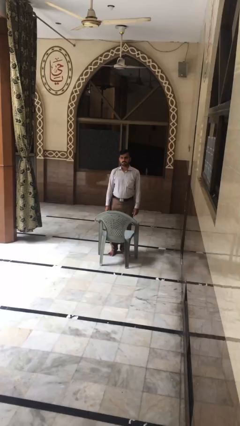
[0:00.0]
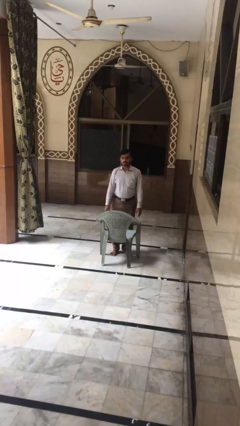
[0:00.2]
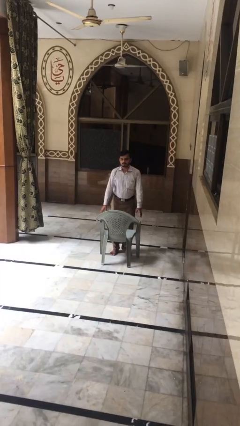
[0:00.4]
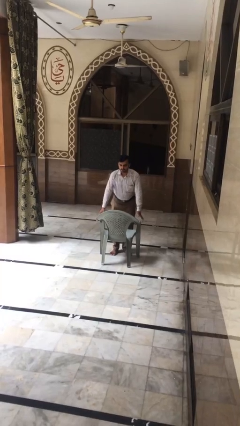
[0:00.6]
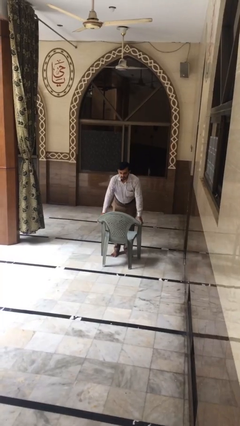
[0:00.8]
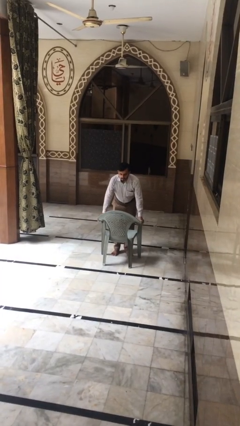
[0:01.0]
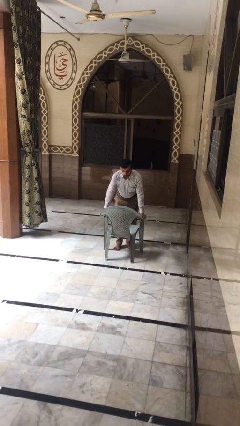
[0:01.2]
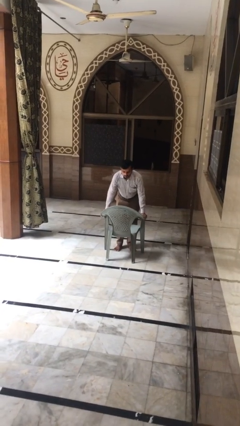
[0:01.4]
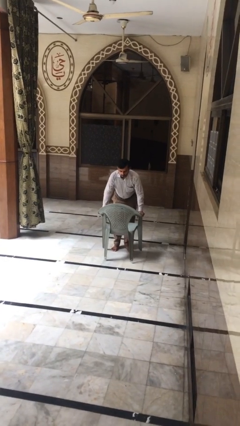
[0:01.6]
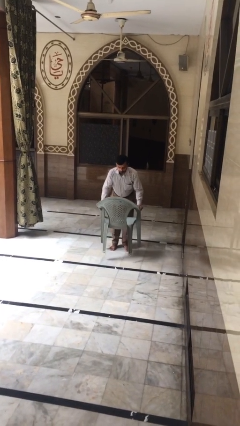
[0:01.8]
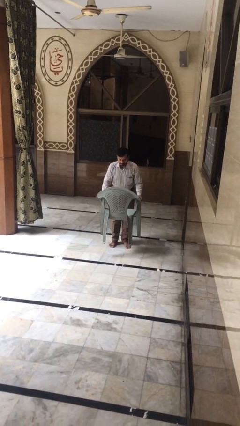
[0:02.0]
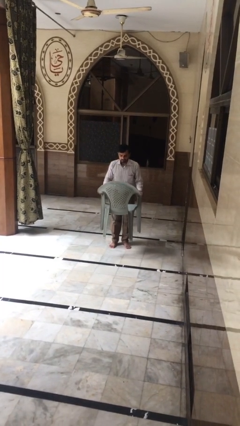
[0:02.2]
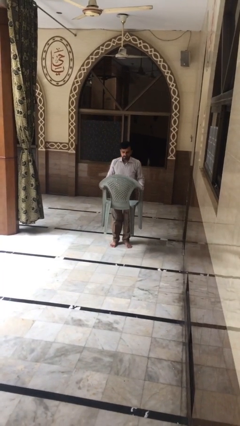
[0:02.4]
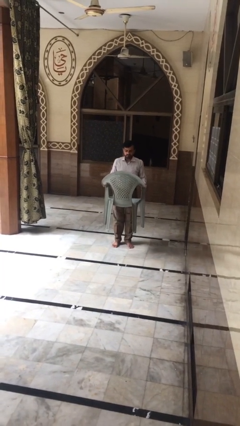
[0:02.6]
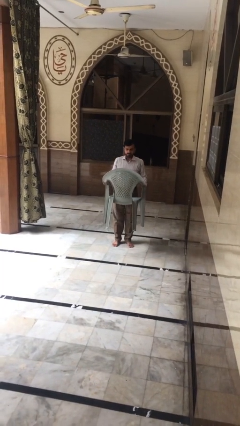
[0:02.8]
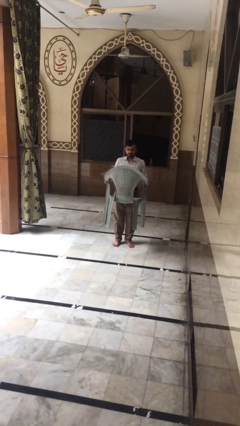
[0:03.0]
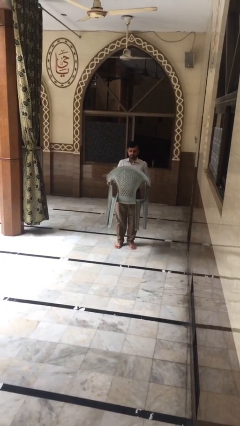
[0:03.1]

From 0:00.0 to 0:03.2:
person picks up object from floor

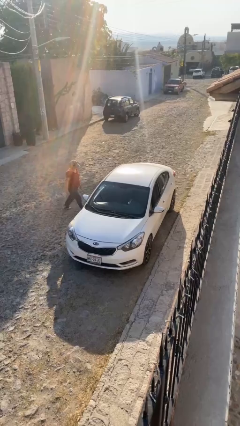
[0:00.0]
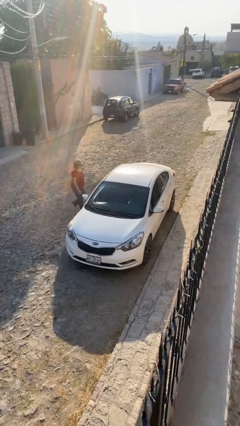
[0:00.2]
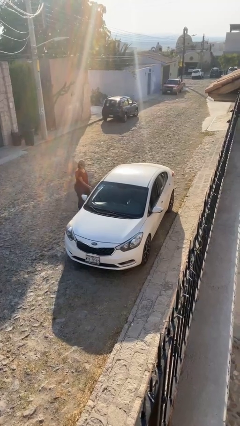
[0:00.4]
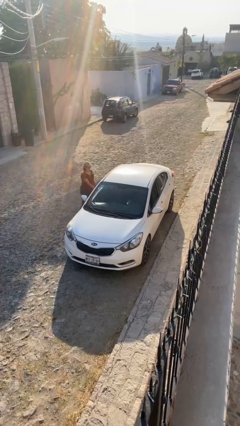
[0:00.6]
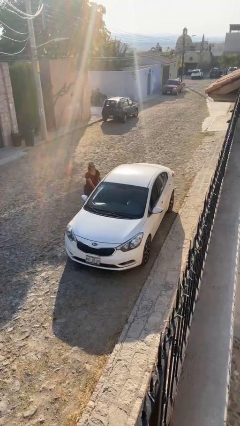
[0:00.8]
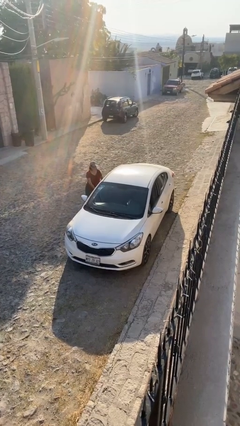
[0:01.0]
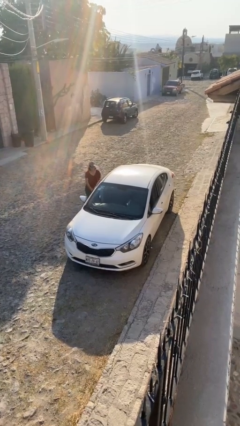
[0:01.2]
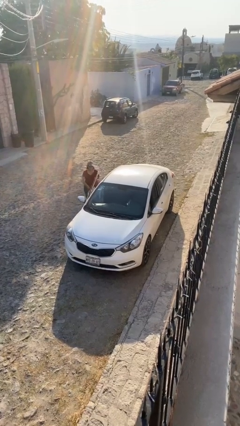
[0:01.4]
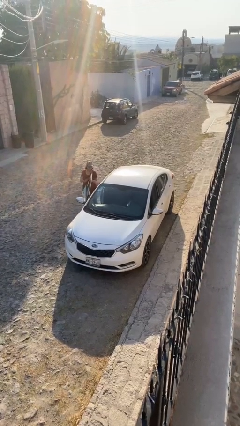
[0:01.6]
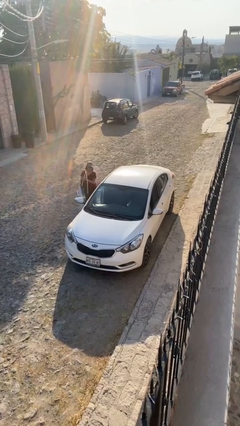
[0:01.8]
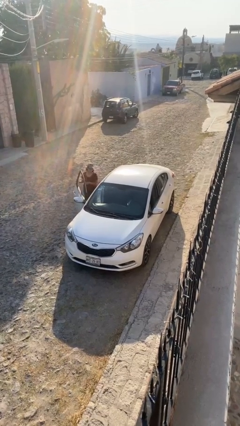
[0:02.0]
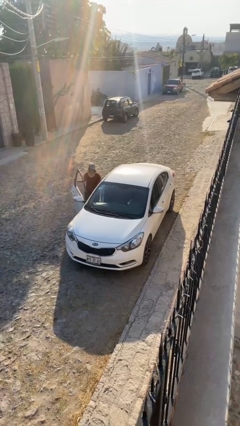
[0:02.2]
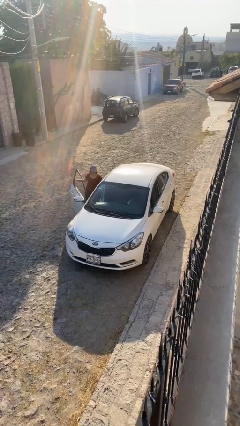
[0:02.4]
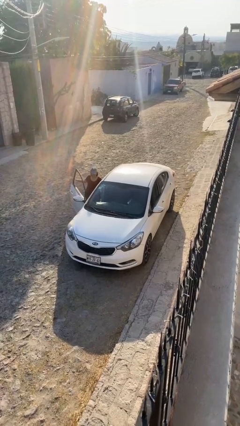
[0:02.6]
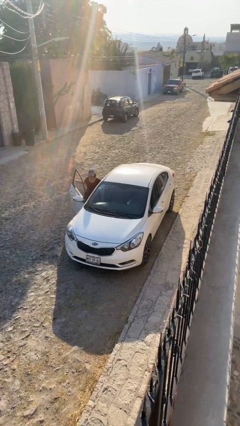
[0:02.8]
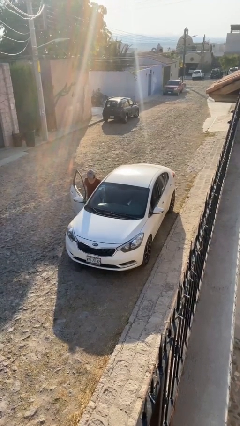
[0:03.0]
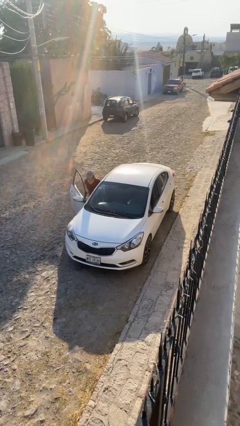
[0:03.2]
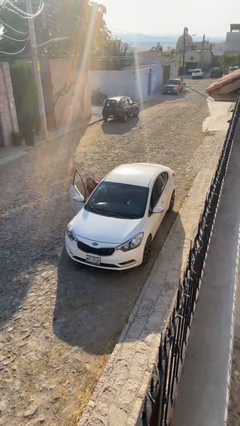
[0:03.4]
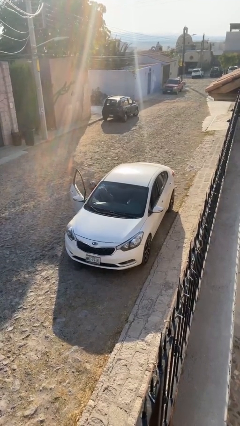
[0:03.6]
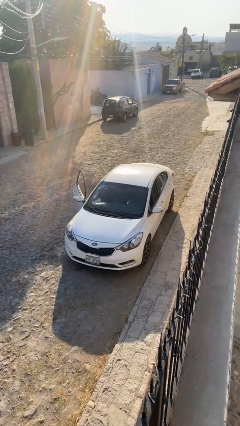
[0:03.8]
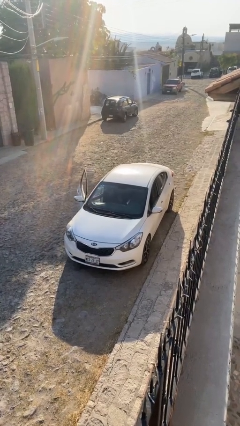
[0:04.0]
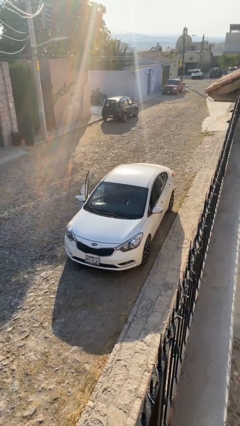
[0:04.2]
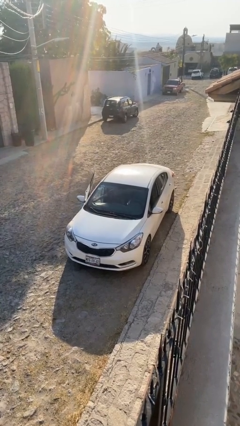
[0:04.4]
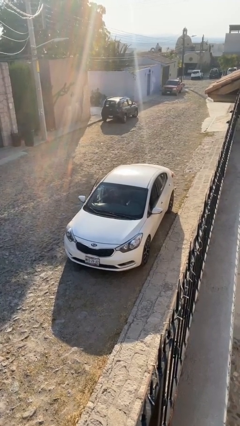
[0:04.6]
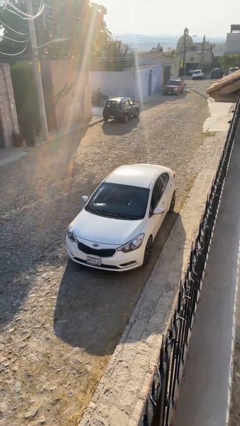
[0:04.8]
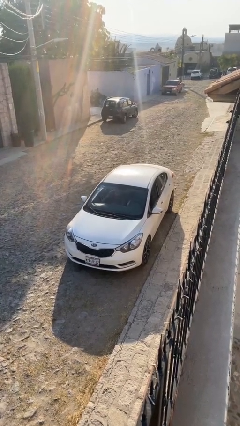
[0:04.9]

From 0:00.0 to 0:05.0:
car picks up person

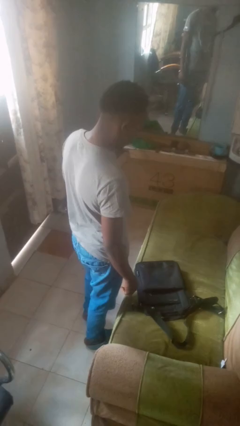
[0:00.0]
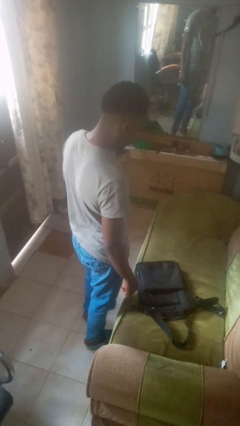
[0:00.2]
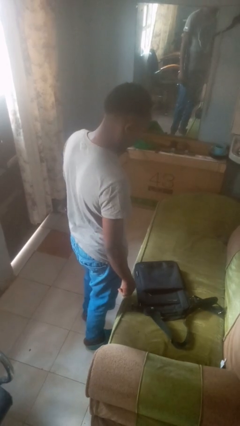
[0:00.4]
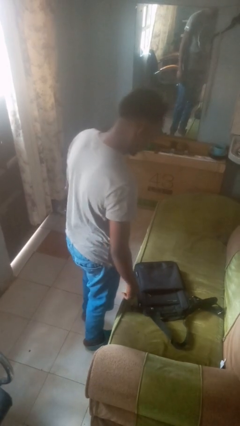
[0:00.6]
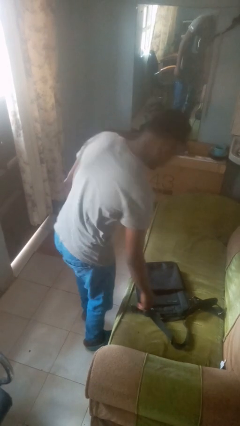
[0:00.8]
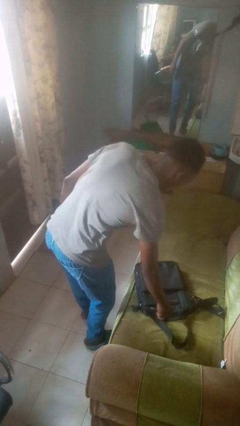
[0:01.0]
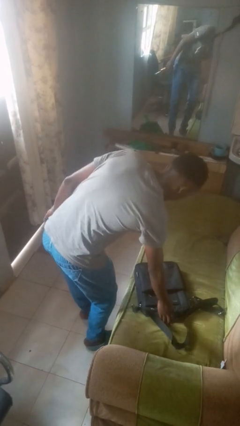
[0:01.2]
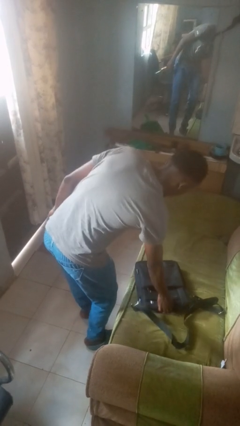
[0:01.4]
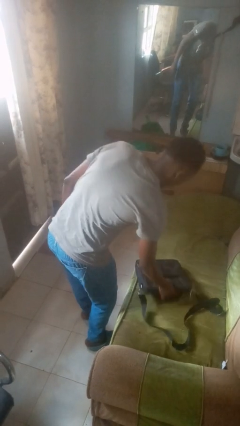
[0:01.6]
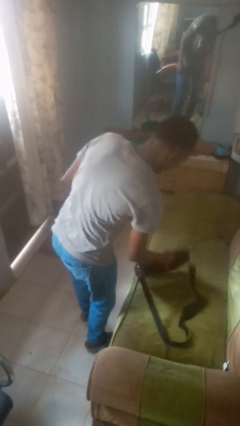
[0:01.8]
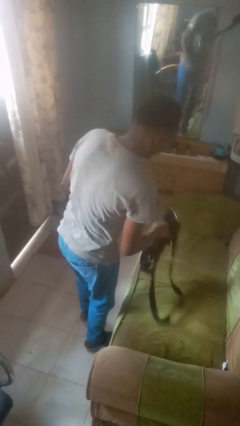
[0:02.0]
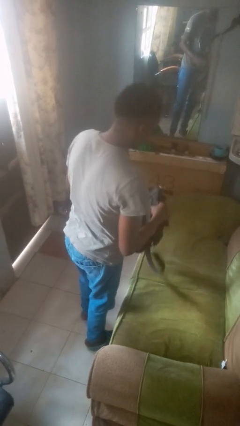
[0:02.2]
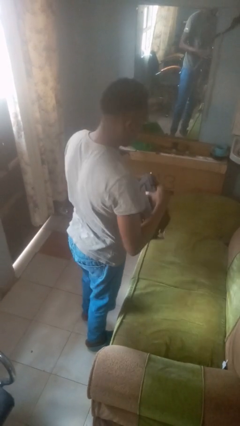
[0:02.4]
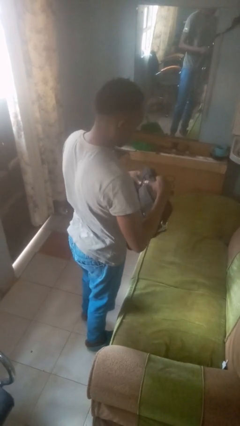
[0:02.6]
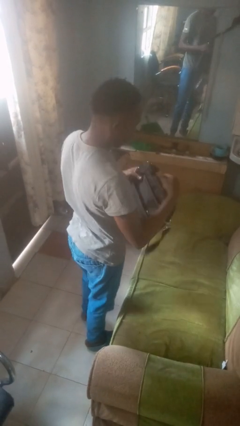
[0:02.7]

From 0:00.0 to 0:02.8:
person picks up object from couch

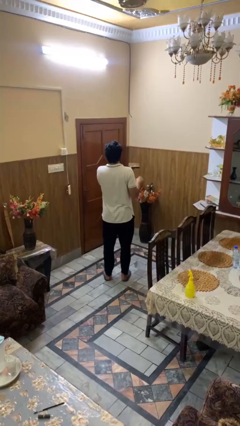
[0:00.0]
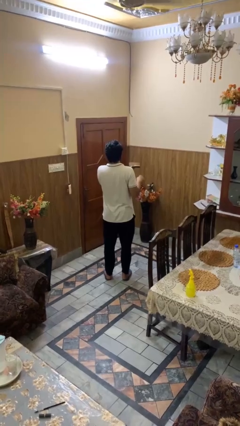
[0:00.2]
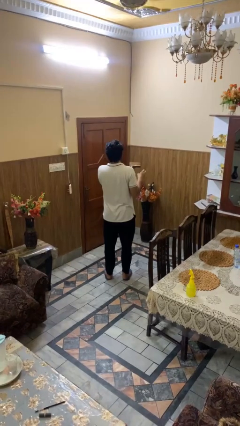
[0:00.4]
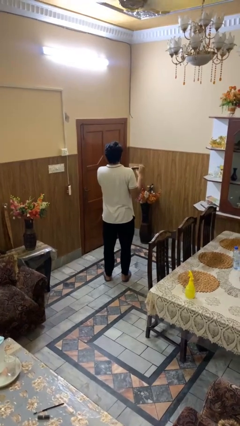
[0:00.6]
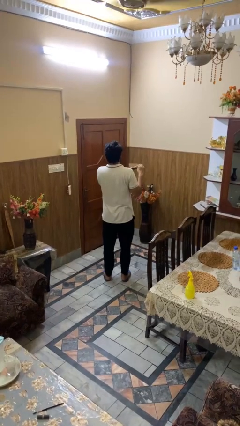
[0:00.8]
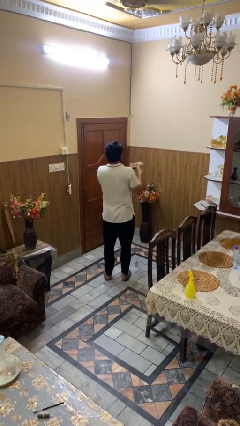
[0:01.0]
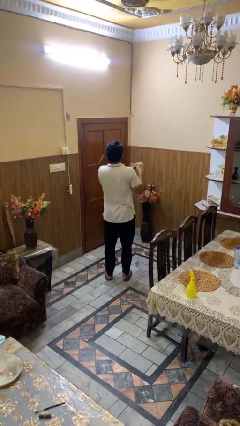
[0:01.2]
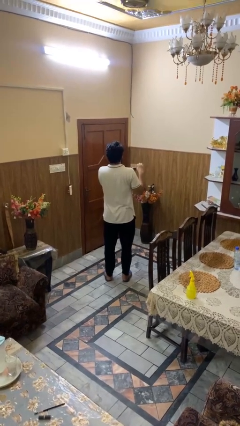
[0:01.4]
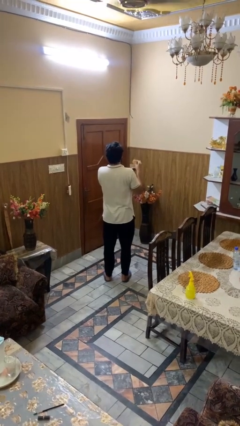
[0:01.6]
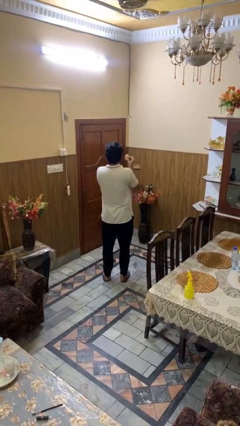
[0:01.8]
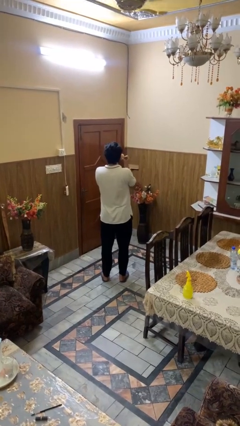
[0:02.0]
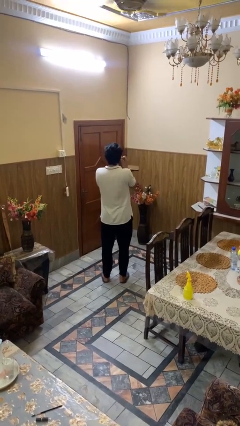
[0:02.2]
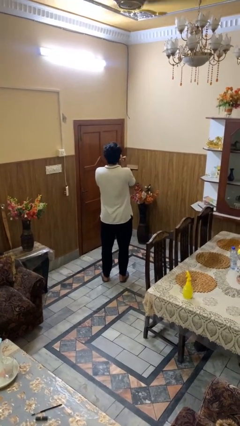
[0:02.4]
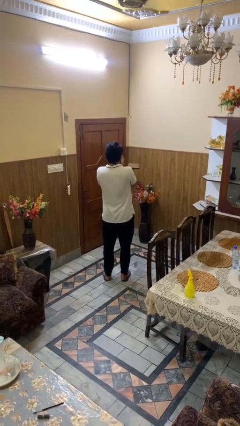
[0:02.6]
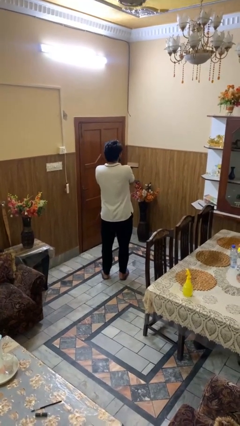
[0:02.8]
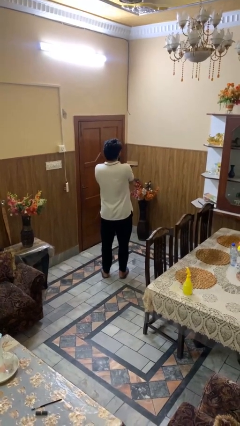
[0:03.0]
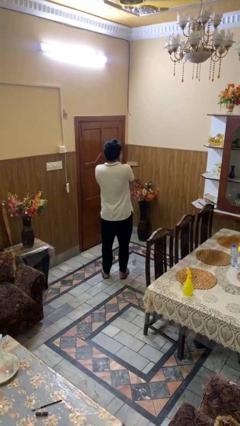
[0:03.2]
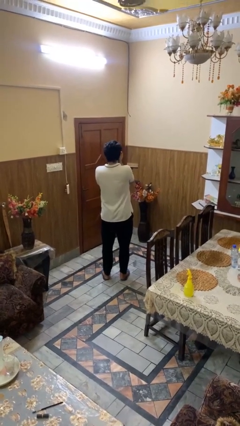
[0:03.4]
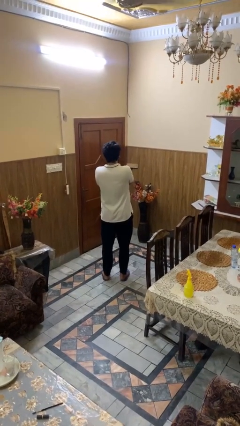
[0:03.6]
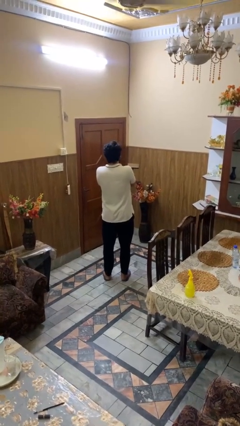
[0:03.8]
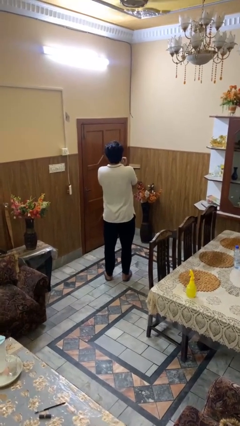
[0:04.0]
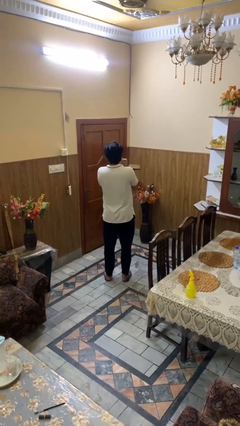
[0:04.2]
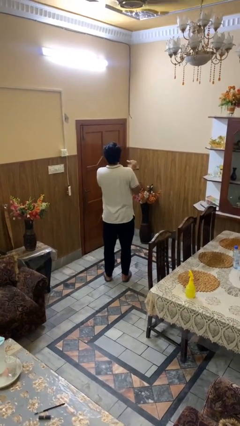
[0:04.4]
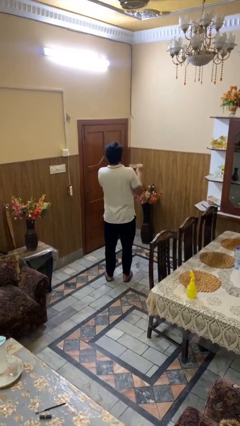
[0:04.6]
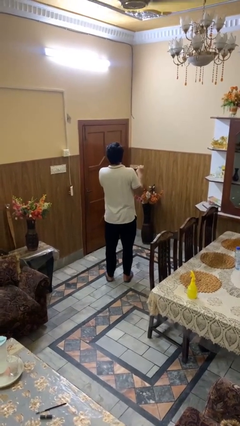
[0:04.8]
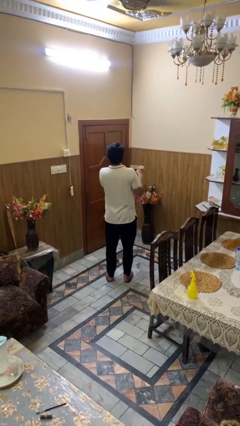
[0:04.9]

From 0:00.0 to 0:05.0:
person applies foundation makeup

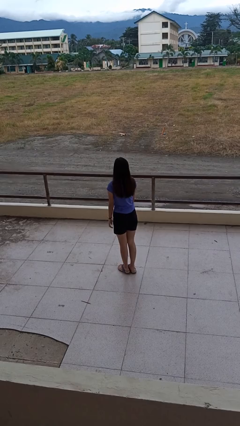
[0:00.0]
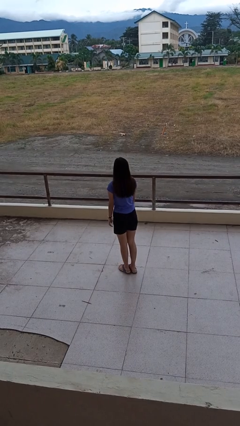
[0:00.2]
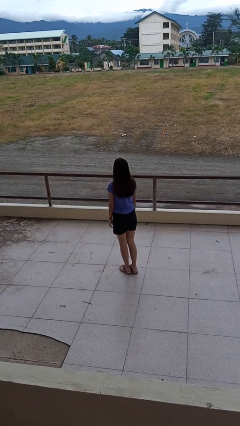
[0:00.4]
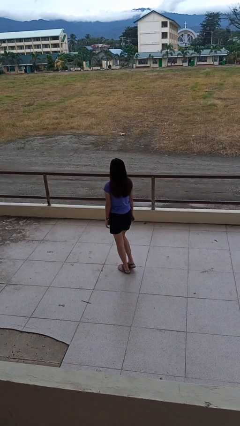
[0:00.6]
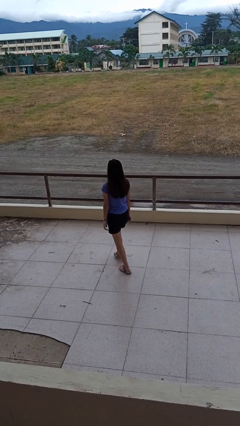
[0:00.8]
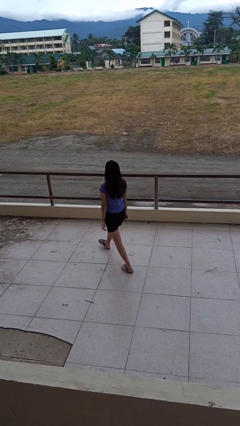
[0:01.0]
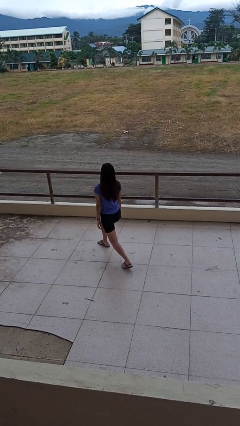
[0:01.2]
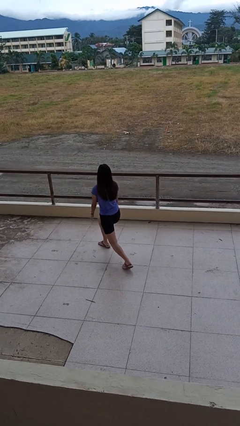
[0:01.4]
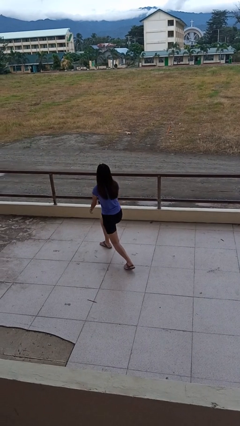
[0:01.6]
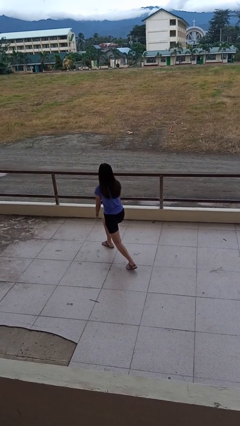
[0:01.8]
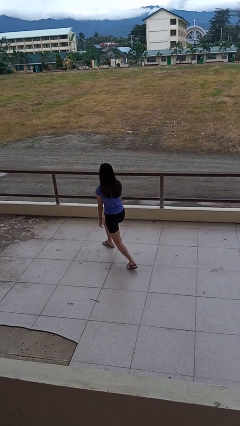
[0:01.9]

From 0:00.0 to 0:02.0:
person exercises with lunges
